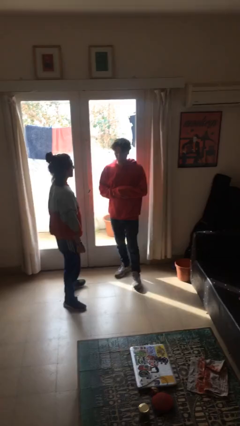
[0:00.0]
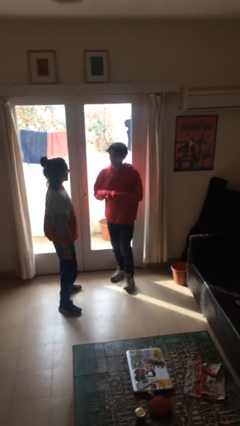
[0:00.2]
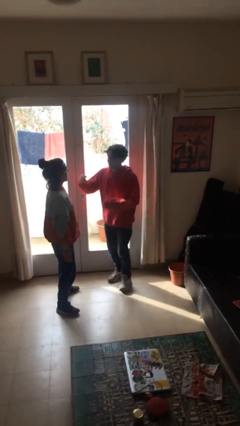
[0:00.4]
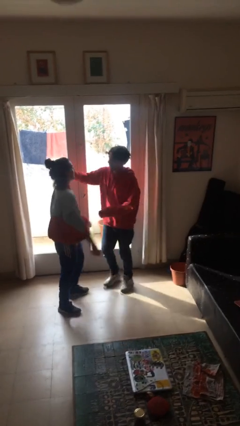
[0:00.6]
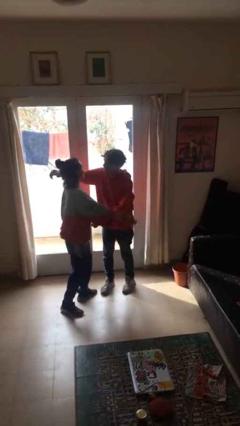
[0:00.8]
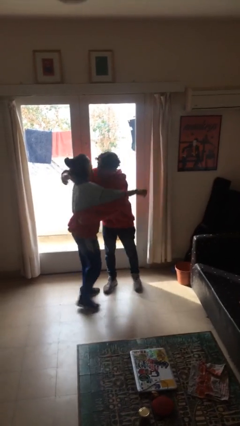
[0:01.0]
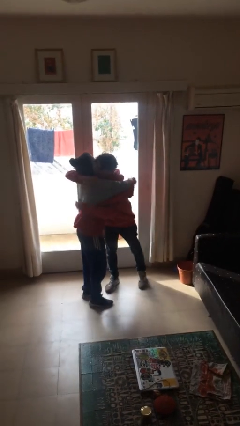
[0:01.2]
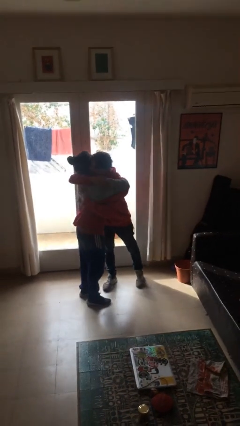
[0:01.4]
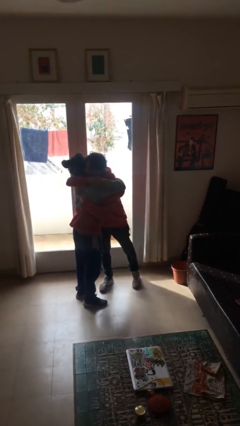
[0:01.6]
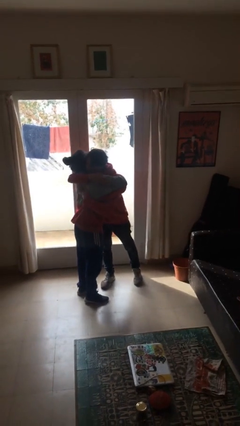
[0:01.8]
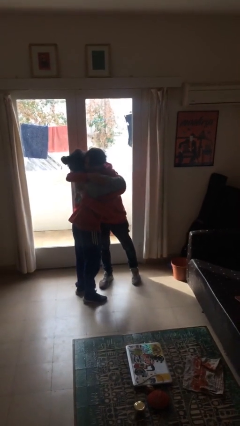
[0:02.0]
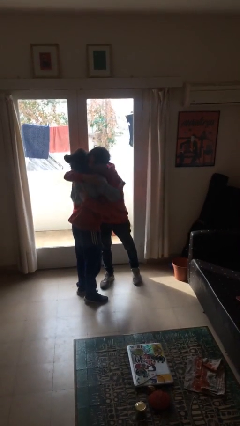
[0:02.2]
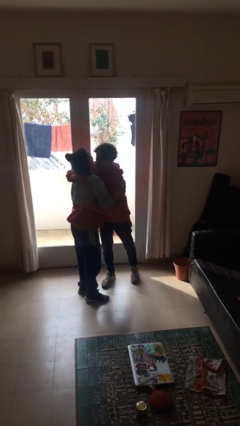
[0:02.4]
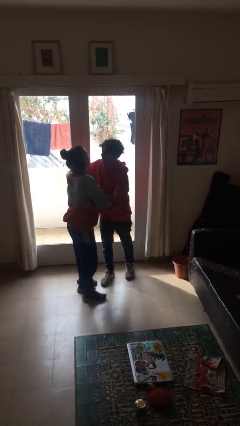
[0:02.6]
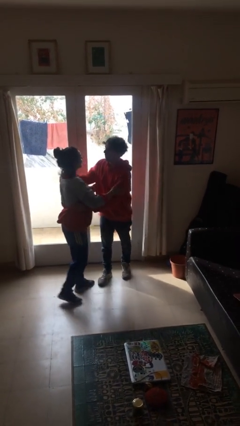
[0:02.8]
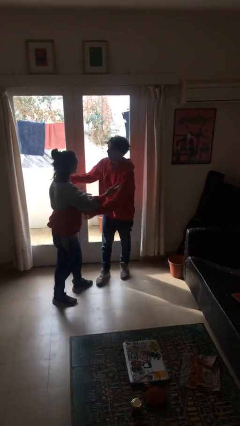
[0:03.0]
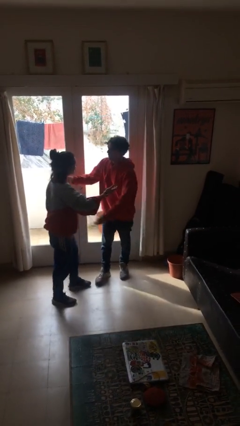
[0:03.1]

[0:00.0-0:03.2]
person embraces person

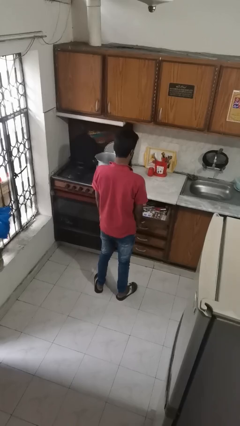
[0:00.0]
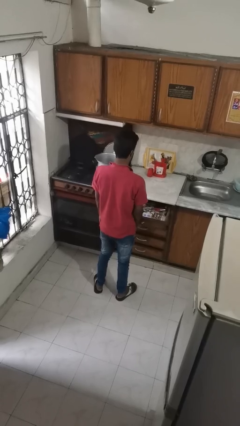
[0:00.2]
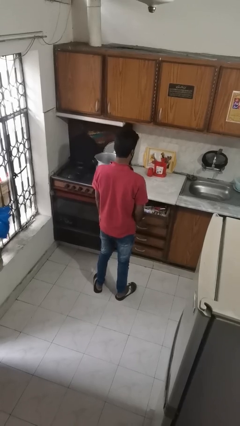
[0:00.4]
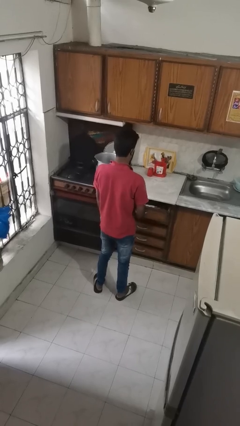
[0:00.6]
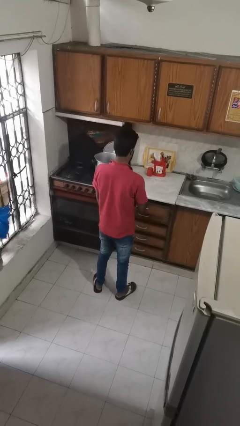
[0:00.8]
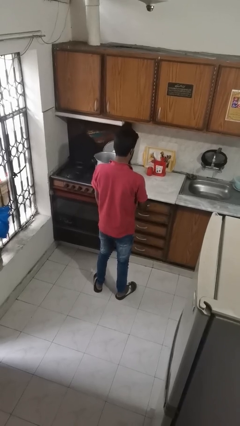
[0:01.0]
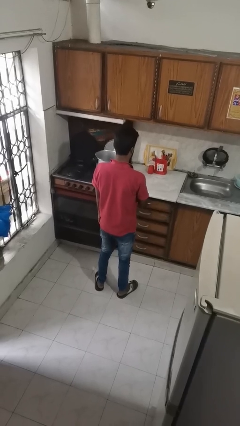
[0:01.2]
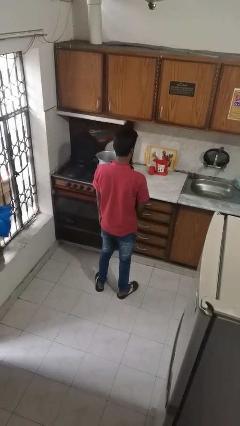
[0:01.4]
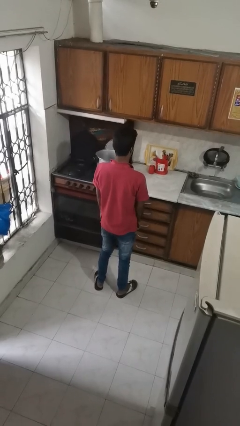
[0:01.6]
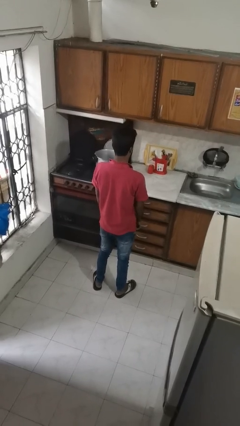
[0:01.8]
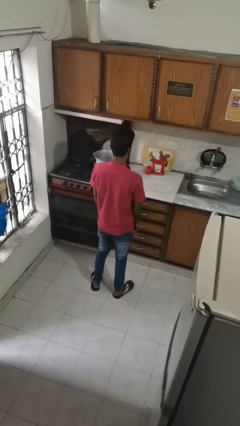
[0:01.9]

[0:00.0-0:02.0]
person closes kitchen drawer

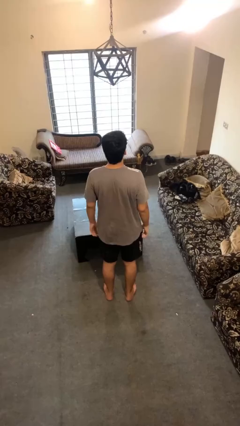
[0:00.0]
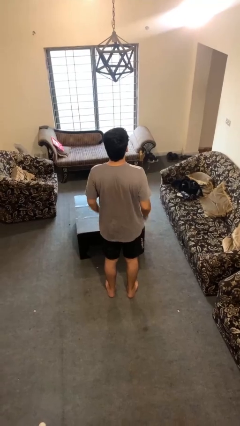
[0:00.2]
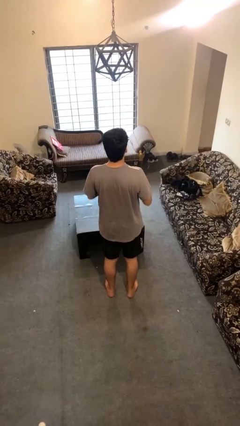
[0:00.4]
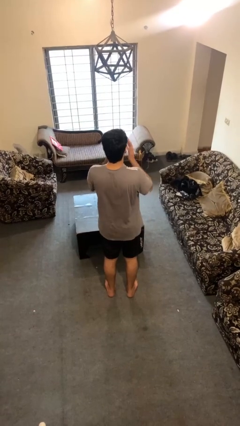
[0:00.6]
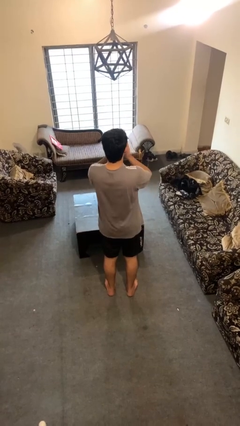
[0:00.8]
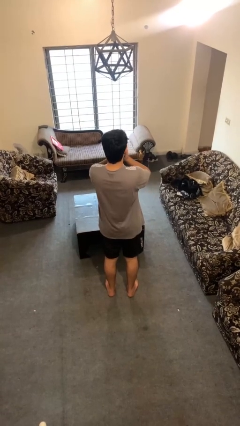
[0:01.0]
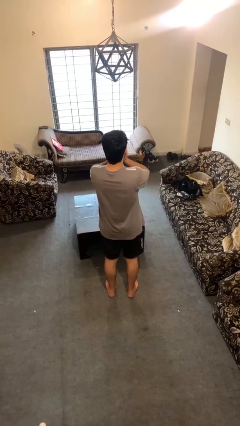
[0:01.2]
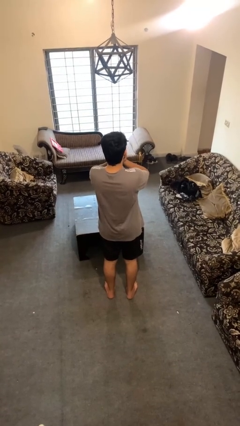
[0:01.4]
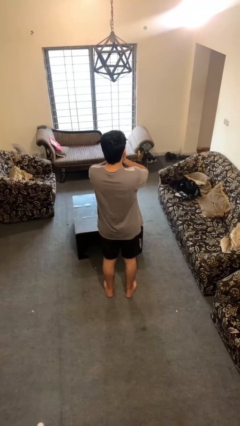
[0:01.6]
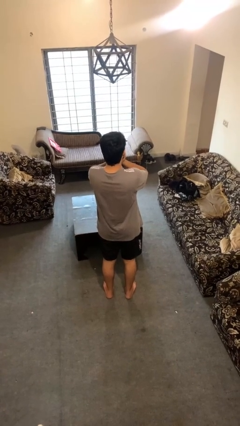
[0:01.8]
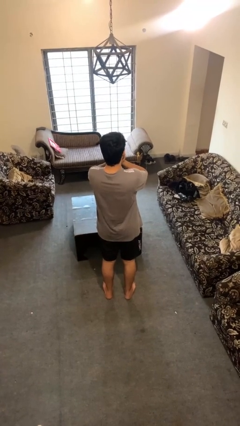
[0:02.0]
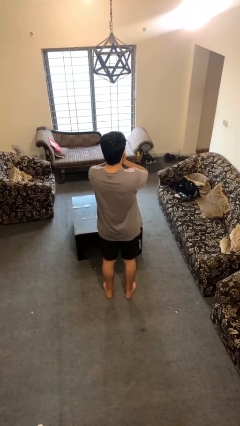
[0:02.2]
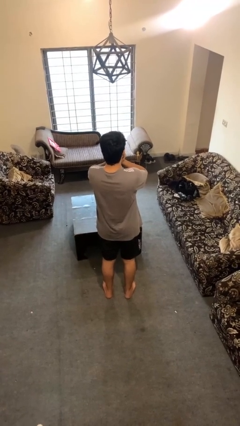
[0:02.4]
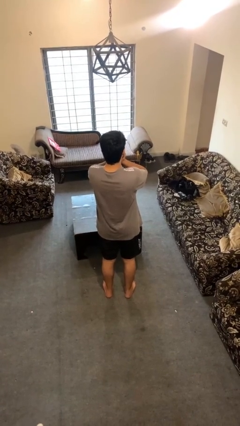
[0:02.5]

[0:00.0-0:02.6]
person covers face with hands

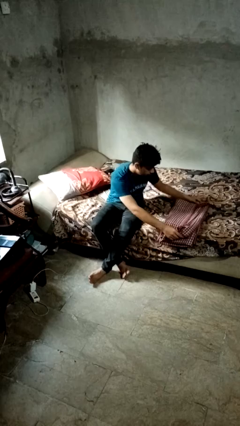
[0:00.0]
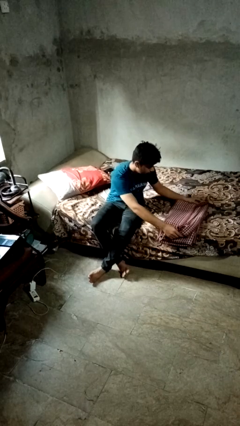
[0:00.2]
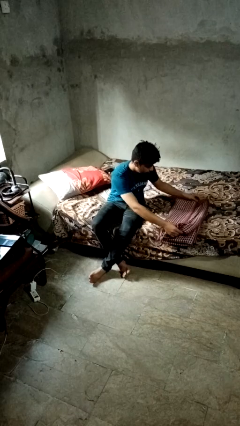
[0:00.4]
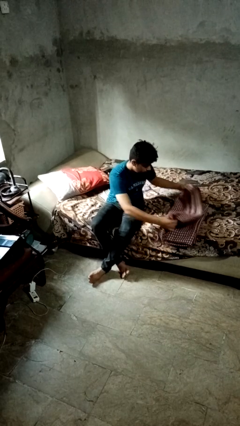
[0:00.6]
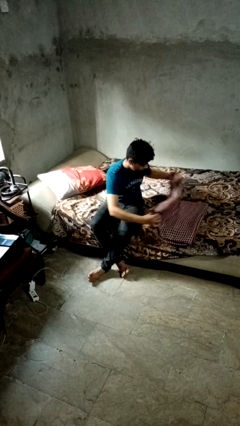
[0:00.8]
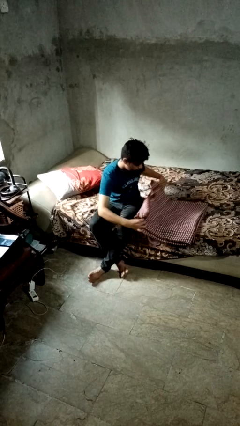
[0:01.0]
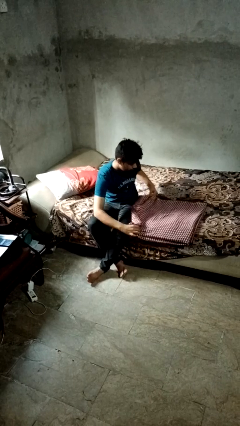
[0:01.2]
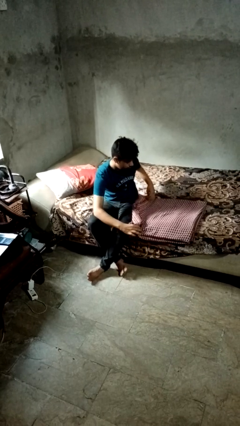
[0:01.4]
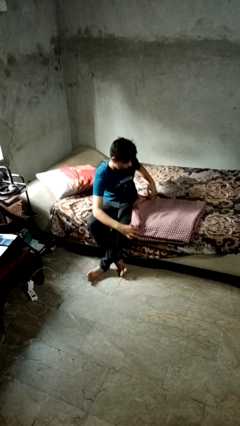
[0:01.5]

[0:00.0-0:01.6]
person unfolds blanket

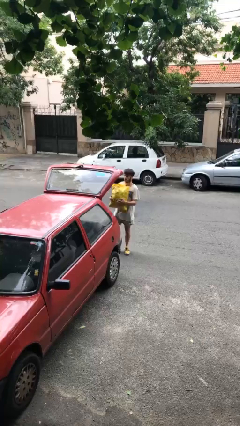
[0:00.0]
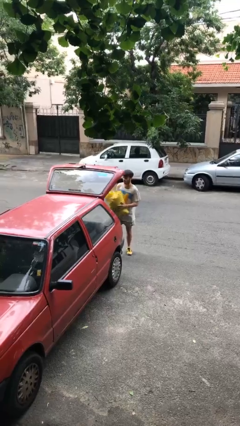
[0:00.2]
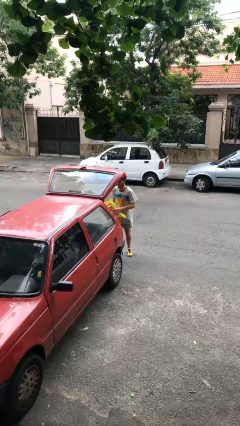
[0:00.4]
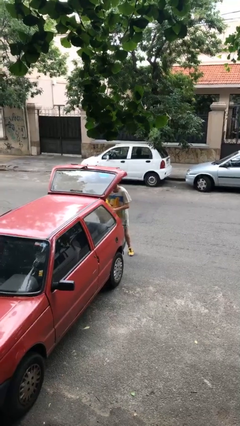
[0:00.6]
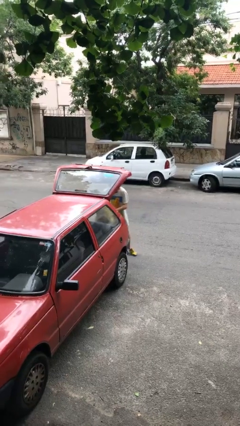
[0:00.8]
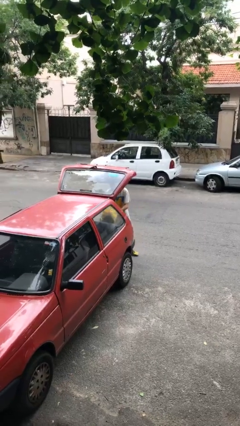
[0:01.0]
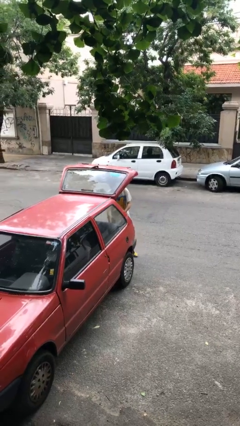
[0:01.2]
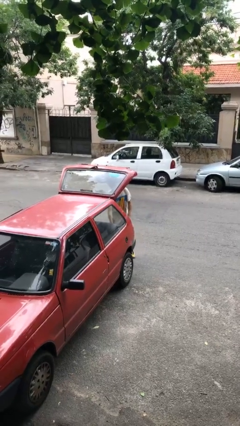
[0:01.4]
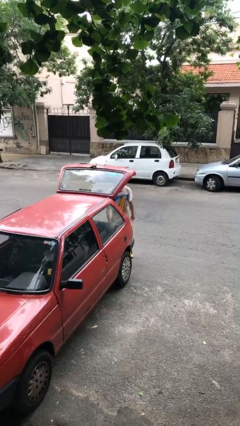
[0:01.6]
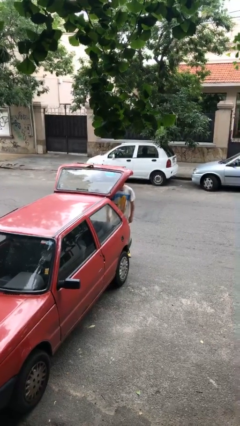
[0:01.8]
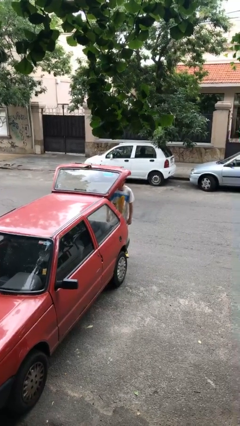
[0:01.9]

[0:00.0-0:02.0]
person loads car

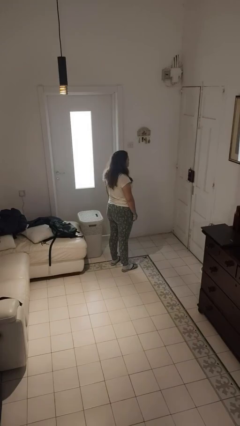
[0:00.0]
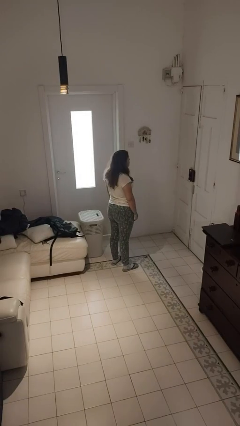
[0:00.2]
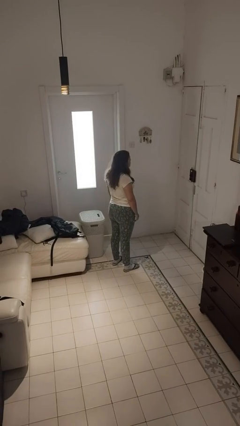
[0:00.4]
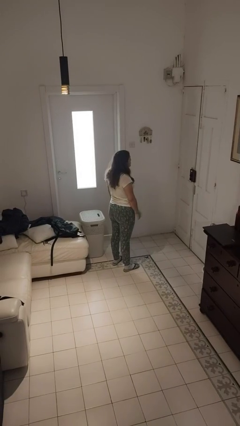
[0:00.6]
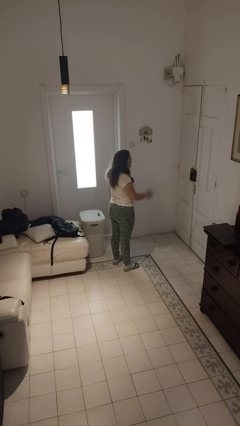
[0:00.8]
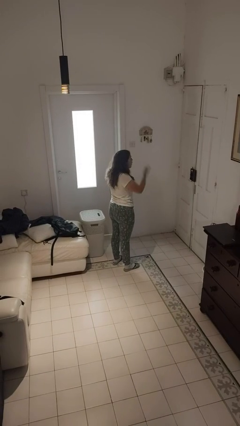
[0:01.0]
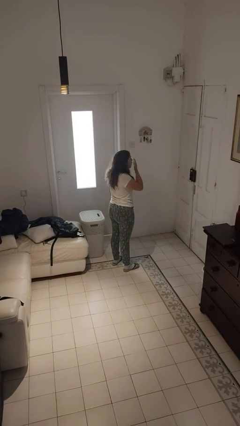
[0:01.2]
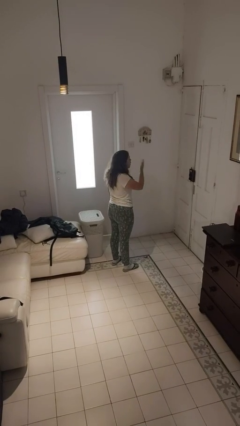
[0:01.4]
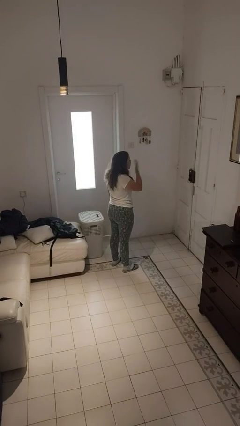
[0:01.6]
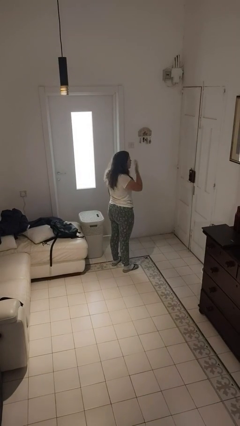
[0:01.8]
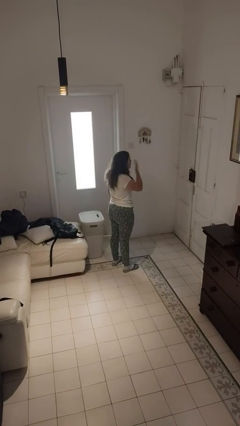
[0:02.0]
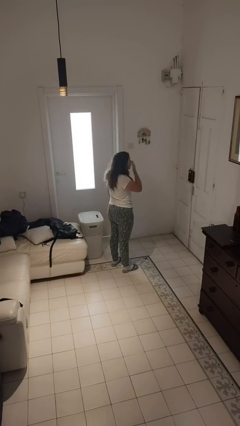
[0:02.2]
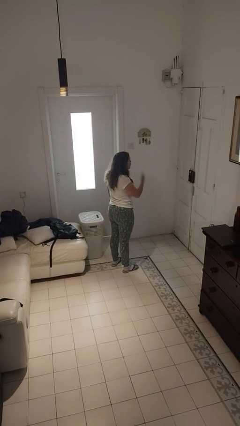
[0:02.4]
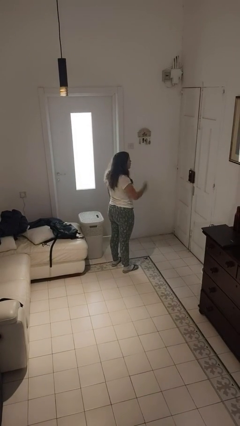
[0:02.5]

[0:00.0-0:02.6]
person yawns

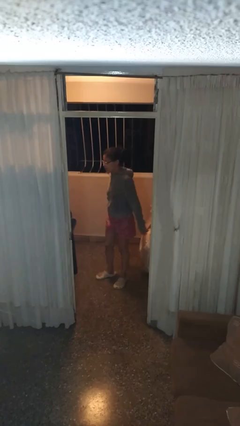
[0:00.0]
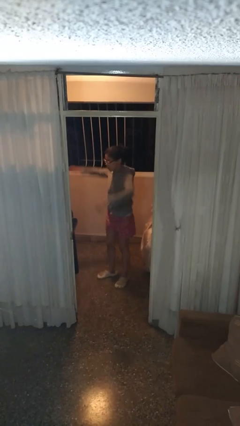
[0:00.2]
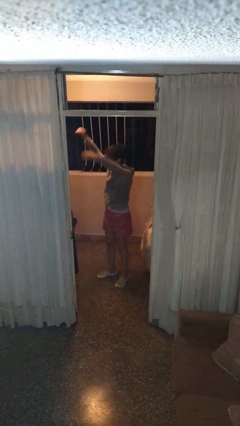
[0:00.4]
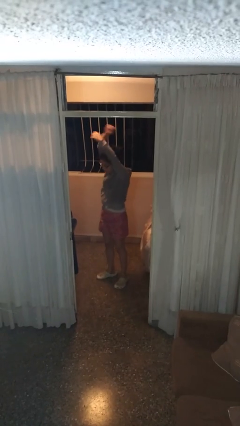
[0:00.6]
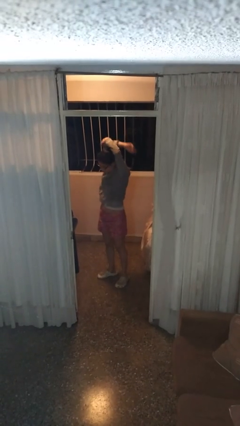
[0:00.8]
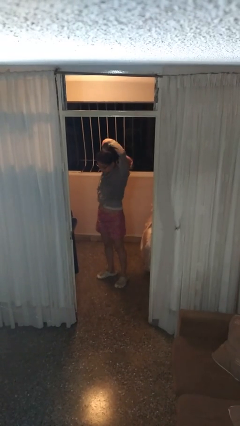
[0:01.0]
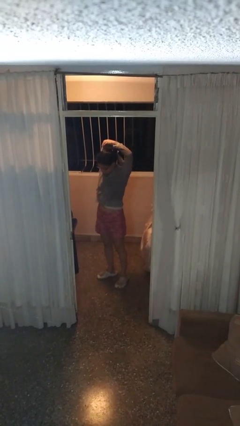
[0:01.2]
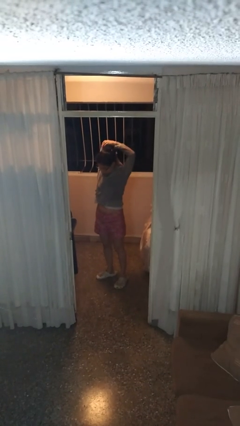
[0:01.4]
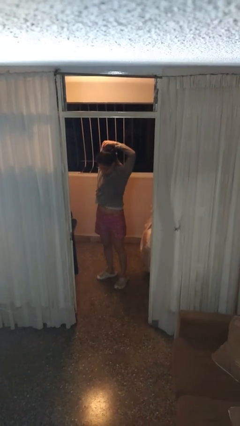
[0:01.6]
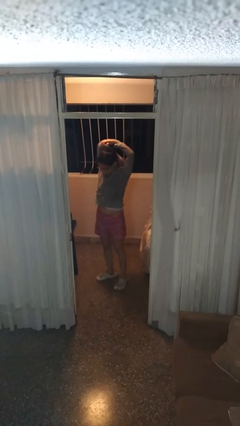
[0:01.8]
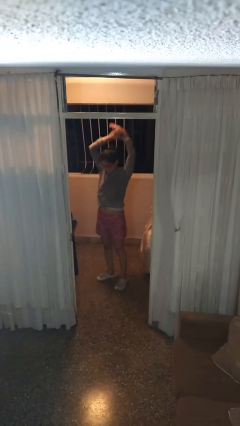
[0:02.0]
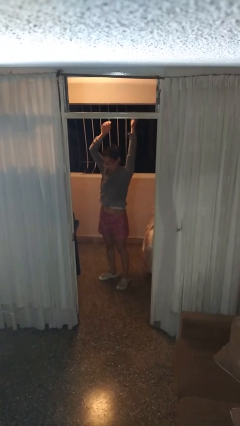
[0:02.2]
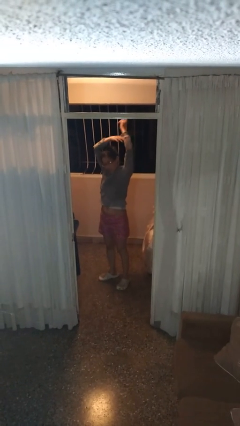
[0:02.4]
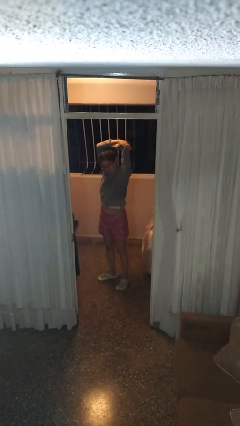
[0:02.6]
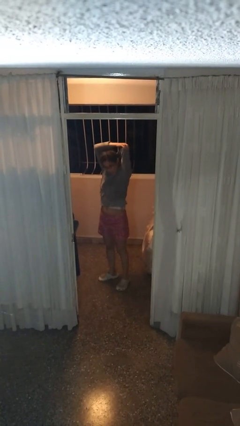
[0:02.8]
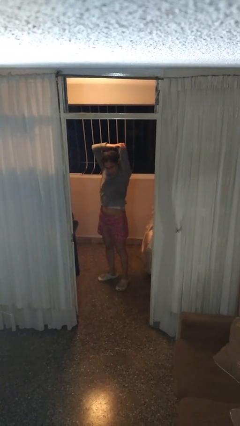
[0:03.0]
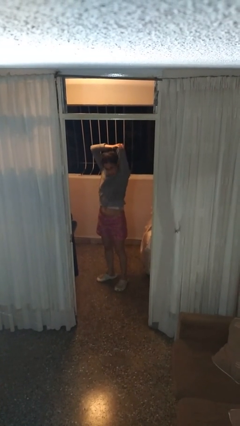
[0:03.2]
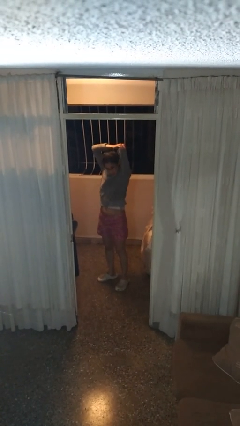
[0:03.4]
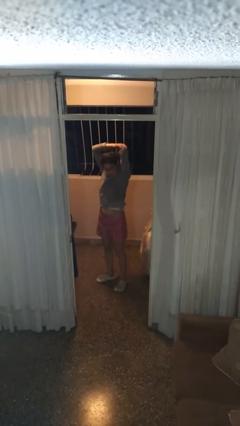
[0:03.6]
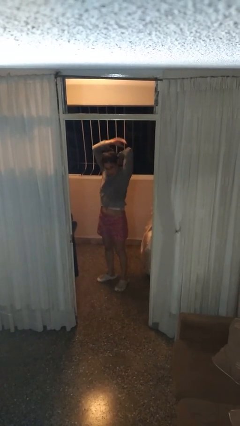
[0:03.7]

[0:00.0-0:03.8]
person stretches arms over head
